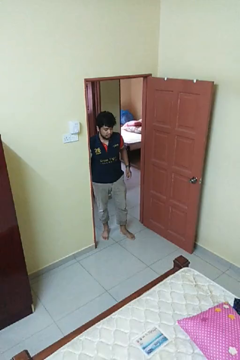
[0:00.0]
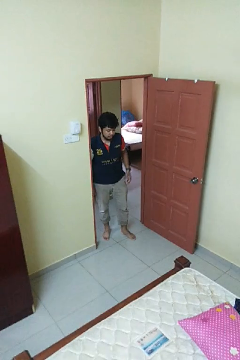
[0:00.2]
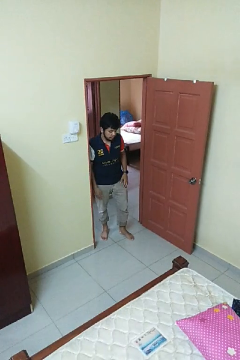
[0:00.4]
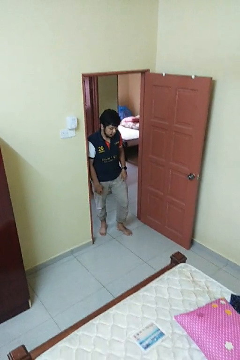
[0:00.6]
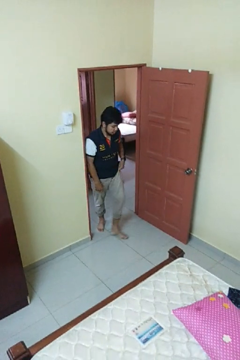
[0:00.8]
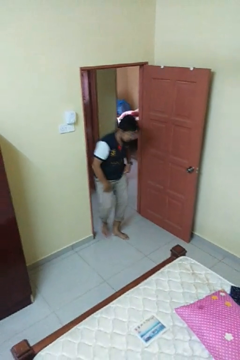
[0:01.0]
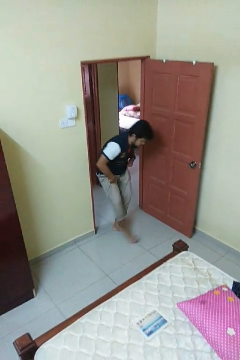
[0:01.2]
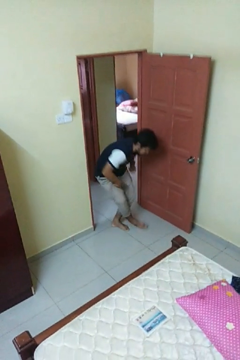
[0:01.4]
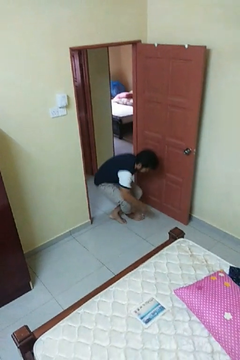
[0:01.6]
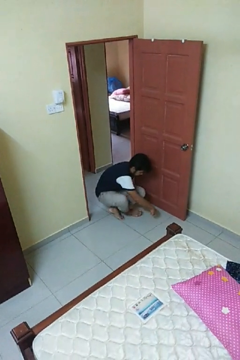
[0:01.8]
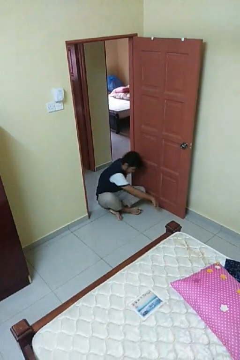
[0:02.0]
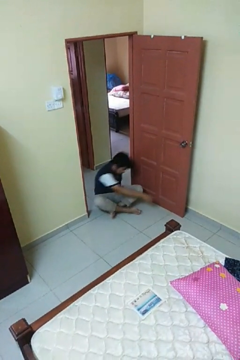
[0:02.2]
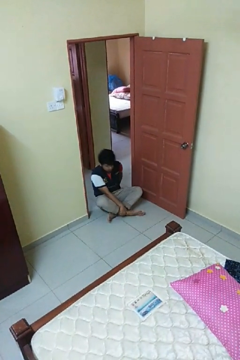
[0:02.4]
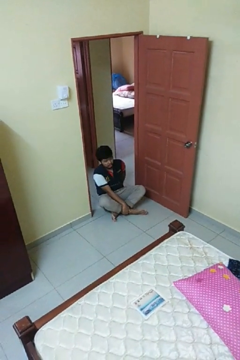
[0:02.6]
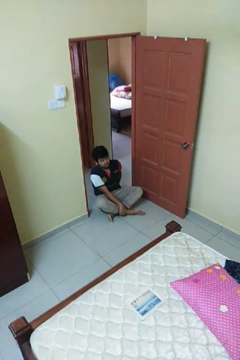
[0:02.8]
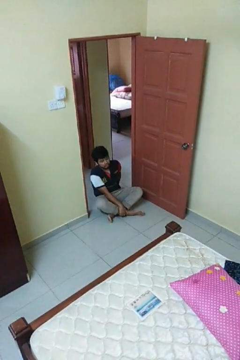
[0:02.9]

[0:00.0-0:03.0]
person sits crisscross

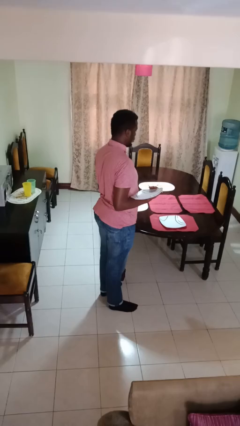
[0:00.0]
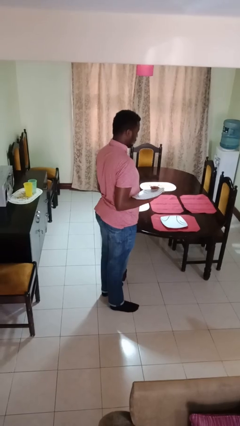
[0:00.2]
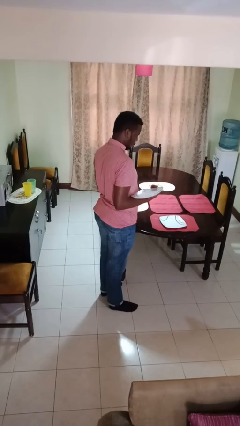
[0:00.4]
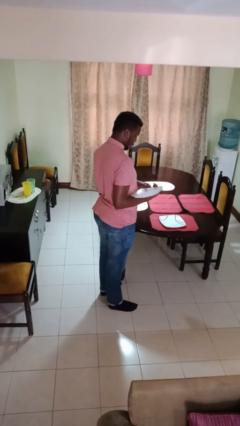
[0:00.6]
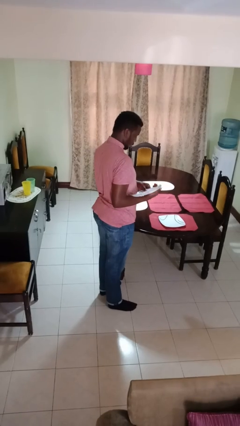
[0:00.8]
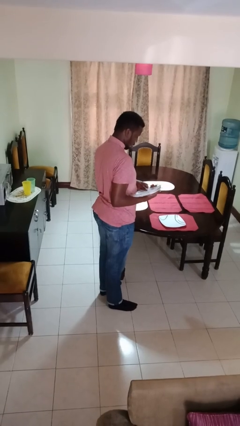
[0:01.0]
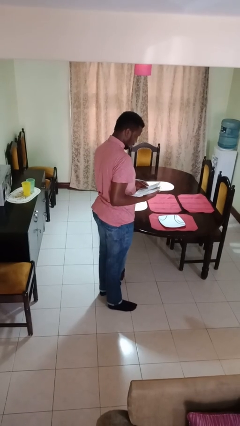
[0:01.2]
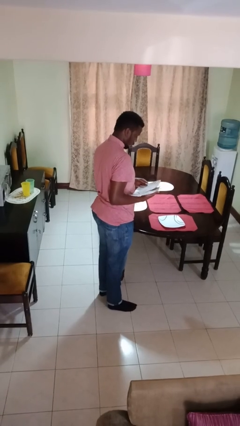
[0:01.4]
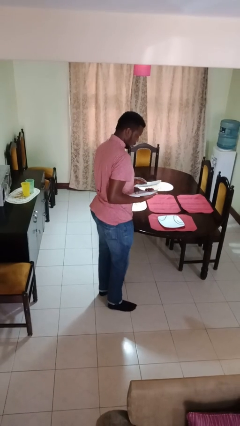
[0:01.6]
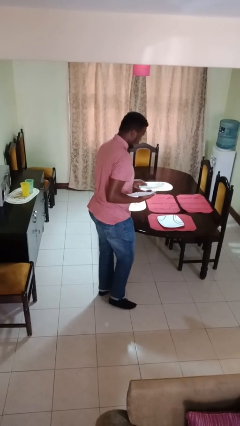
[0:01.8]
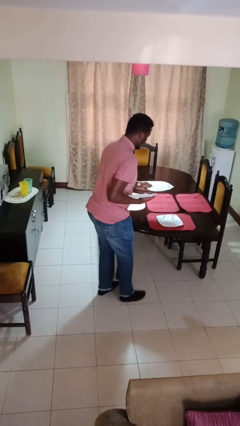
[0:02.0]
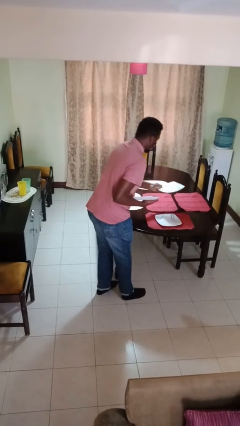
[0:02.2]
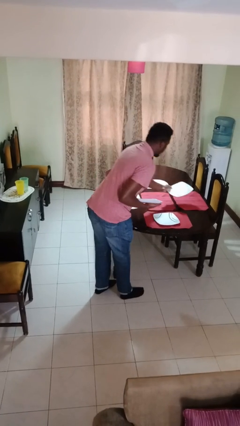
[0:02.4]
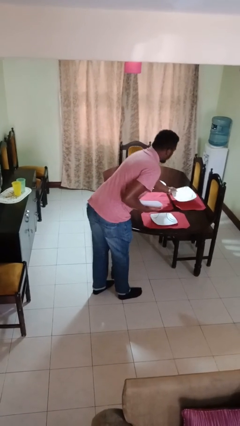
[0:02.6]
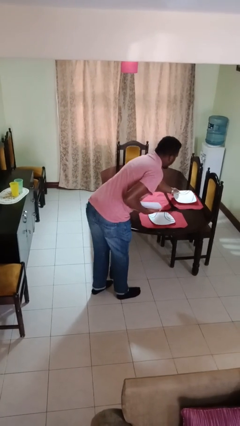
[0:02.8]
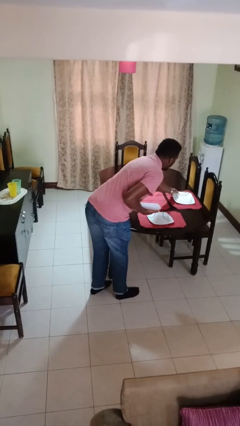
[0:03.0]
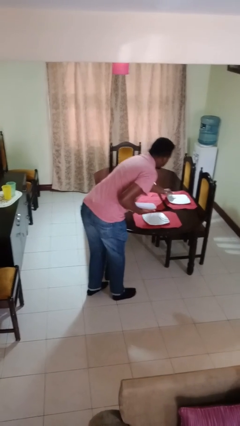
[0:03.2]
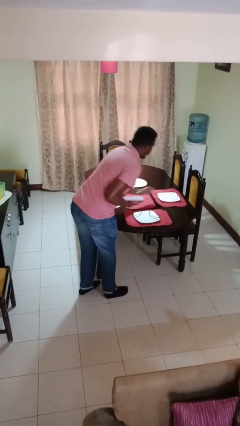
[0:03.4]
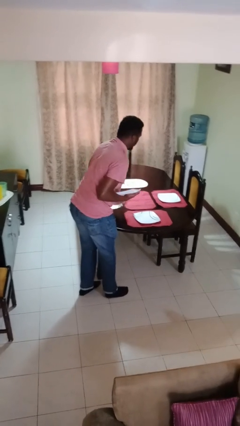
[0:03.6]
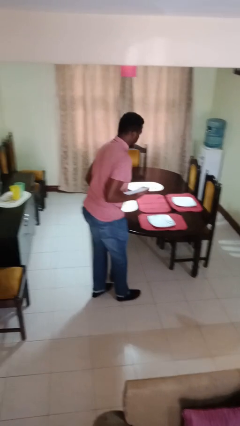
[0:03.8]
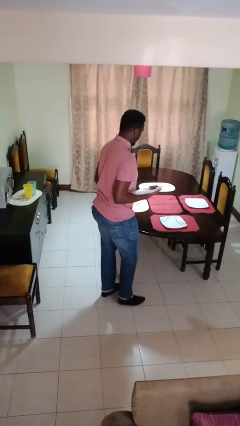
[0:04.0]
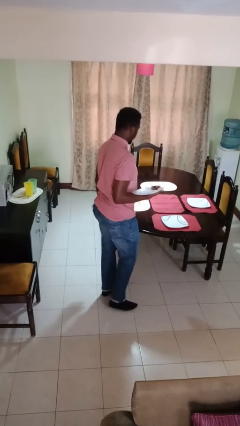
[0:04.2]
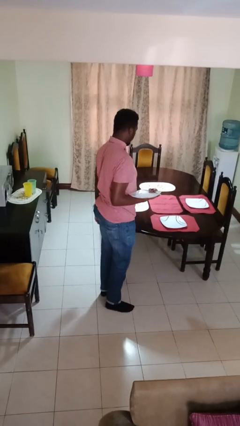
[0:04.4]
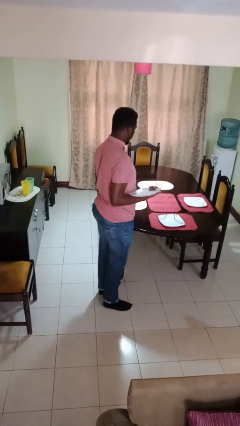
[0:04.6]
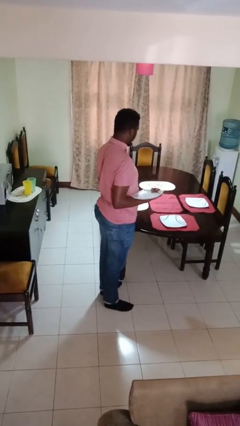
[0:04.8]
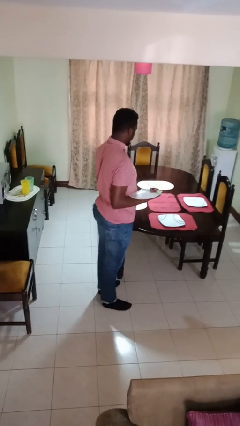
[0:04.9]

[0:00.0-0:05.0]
person sets table

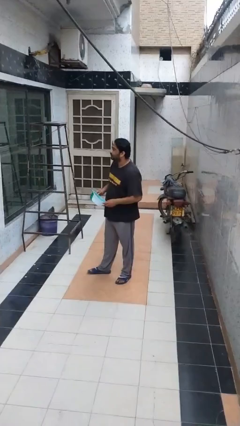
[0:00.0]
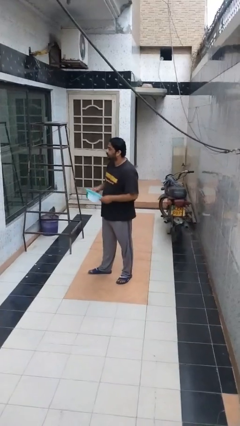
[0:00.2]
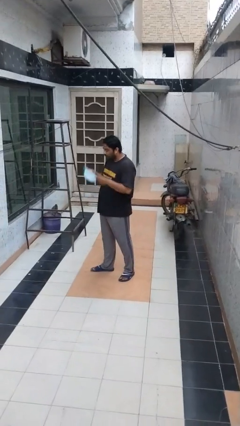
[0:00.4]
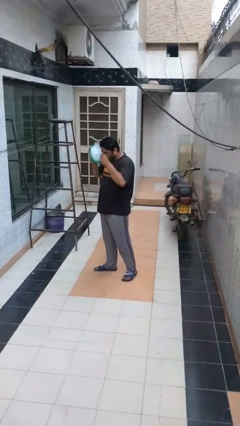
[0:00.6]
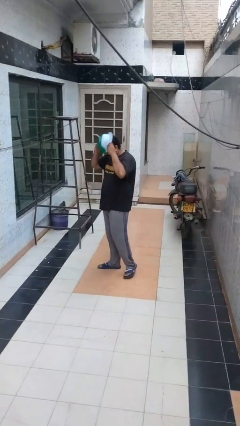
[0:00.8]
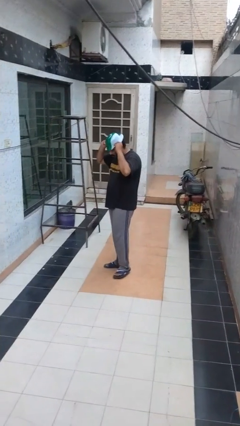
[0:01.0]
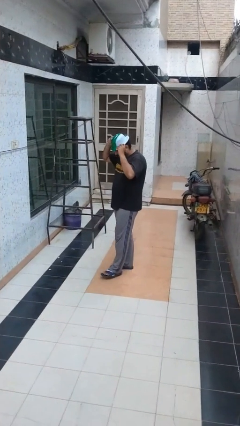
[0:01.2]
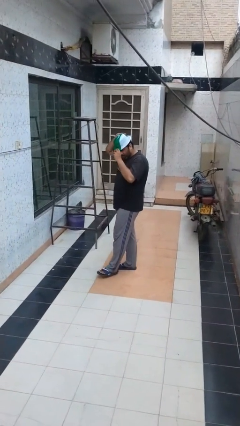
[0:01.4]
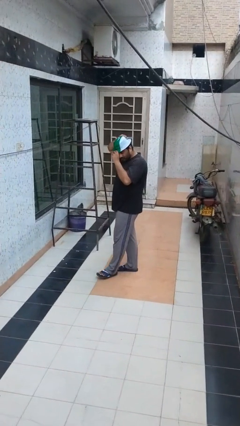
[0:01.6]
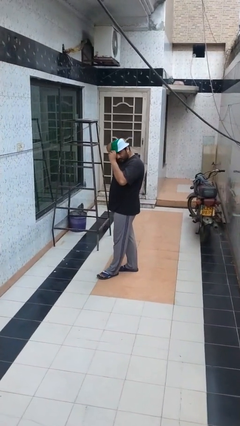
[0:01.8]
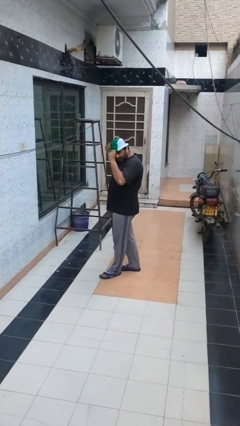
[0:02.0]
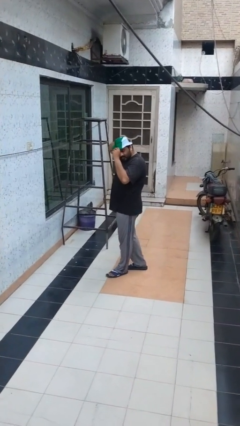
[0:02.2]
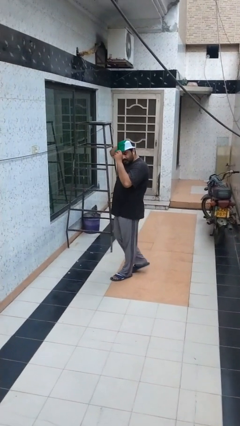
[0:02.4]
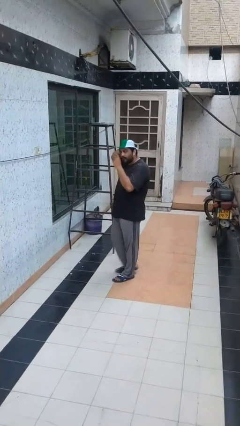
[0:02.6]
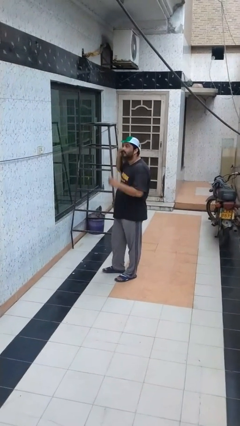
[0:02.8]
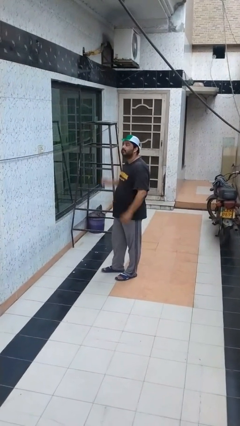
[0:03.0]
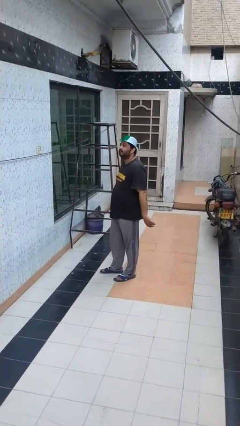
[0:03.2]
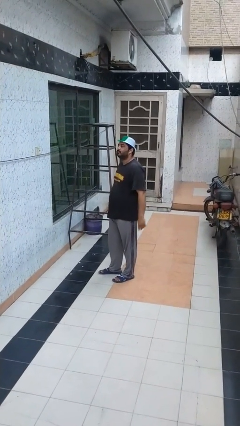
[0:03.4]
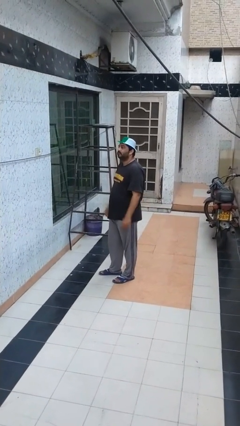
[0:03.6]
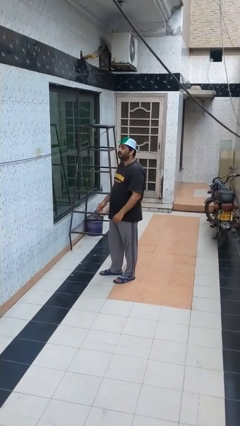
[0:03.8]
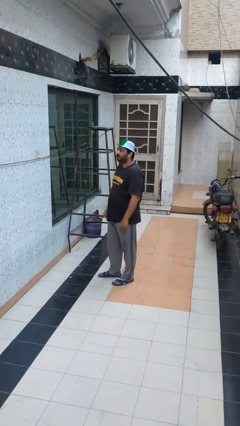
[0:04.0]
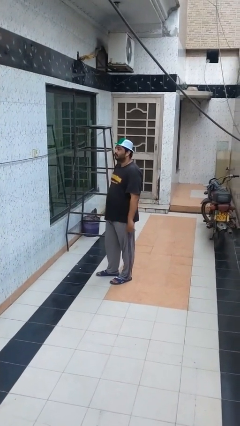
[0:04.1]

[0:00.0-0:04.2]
person puts on hat

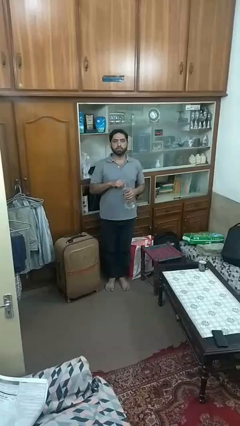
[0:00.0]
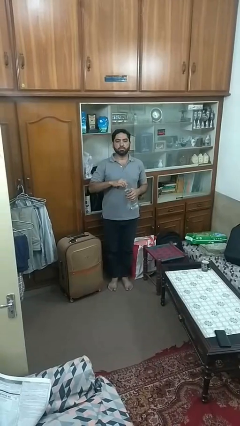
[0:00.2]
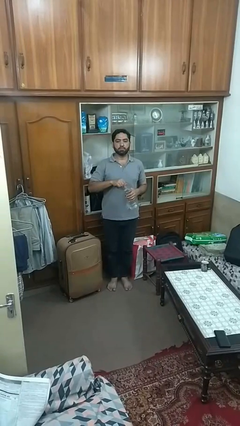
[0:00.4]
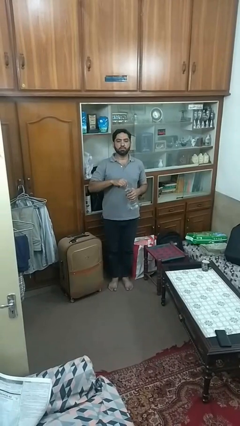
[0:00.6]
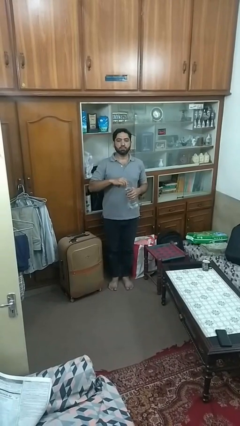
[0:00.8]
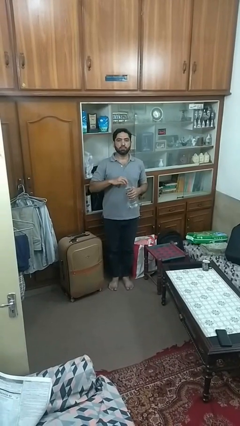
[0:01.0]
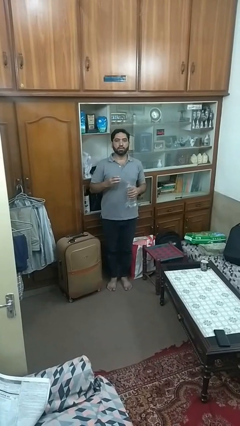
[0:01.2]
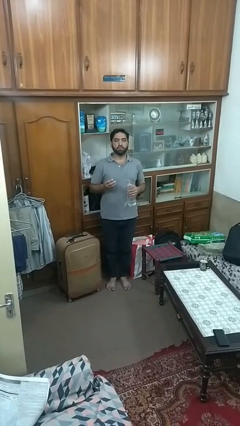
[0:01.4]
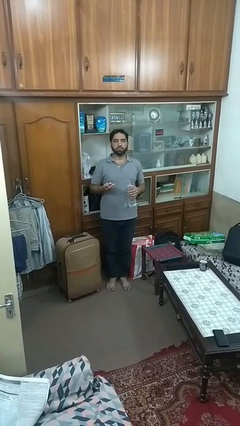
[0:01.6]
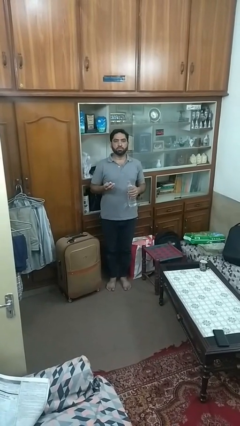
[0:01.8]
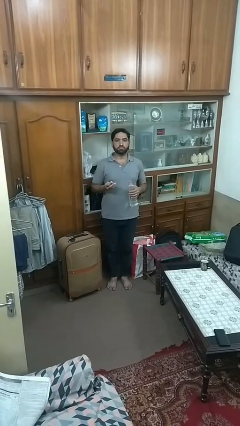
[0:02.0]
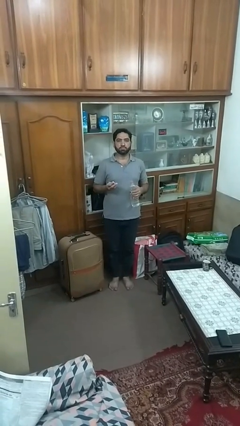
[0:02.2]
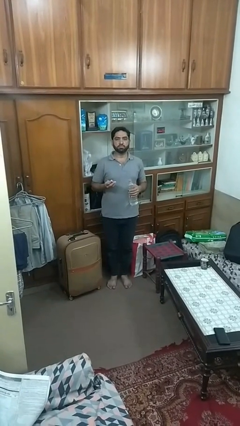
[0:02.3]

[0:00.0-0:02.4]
person unscrews lid from bottle

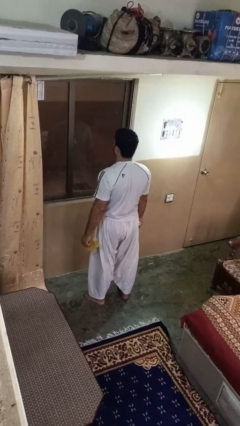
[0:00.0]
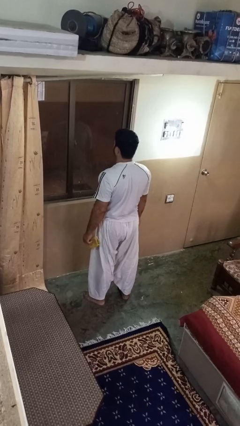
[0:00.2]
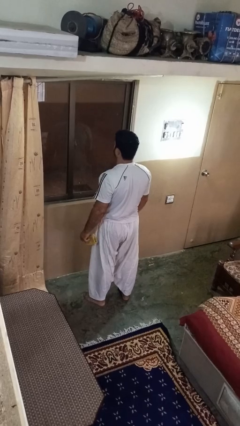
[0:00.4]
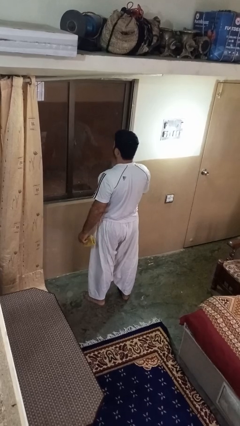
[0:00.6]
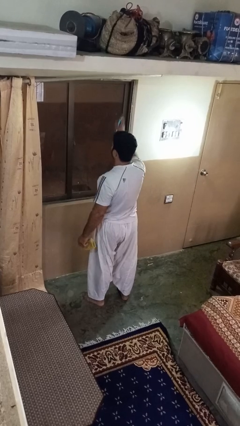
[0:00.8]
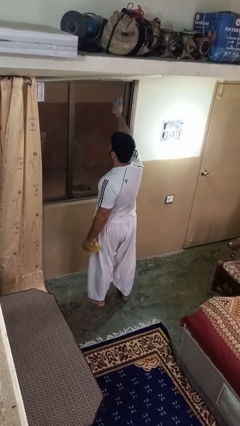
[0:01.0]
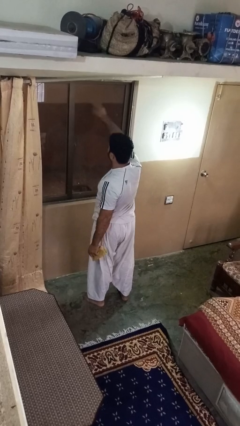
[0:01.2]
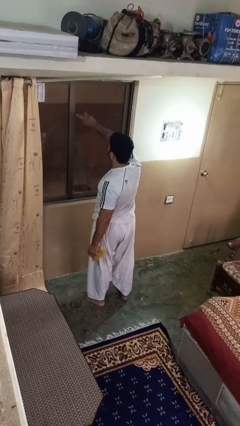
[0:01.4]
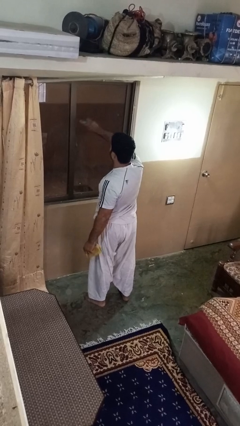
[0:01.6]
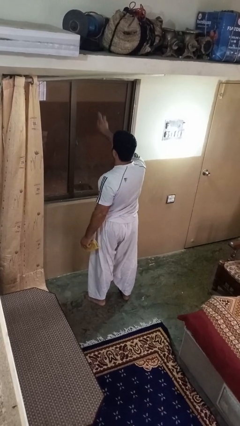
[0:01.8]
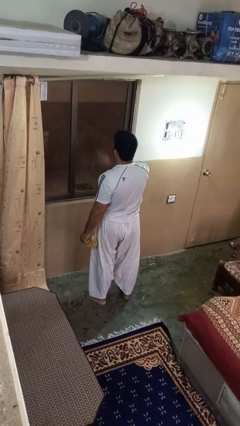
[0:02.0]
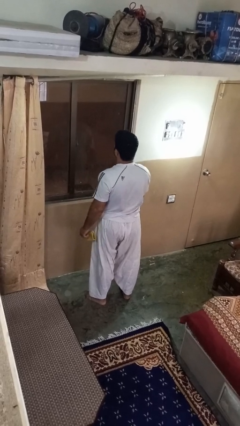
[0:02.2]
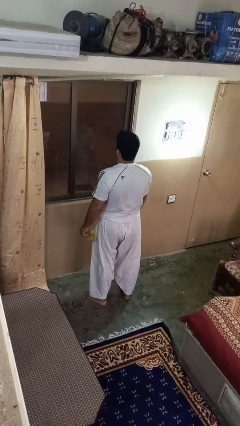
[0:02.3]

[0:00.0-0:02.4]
person sprays from bottle

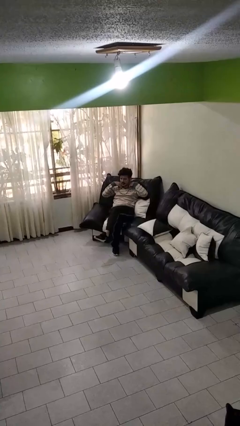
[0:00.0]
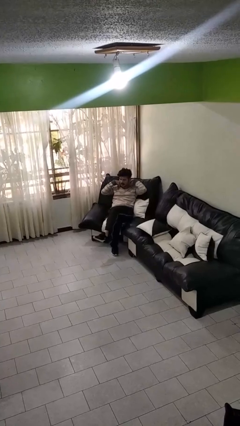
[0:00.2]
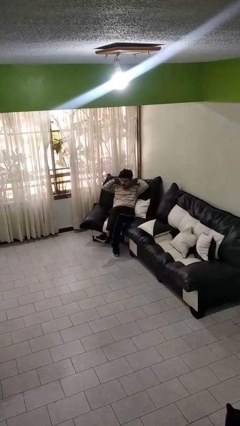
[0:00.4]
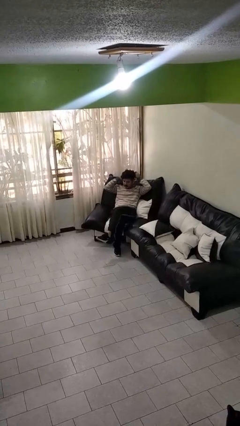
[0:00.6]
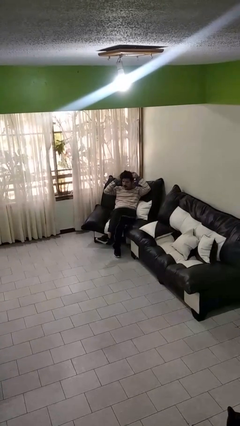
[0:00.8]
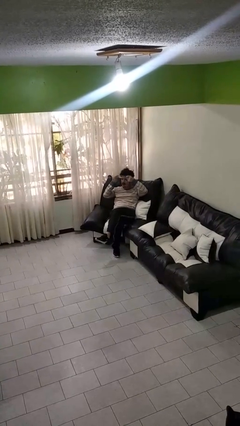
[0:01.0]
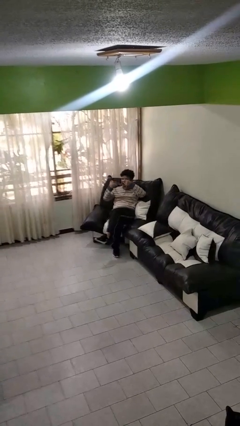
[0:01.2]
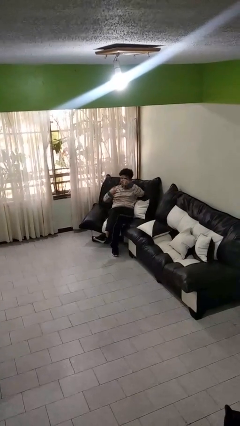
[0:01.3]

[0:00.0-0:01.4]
person takes off necklace
